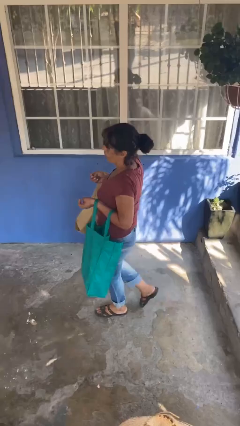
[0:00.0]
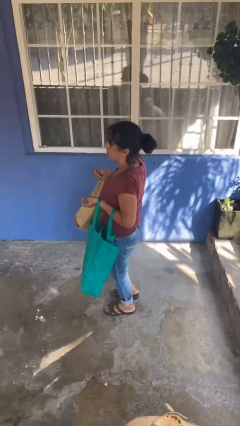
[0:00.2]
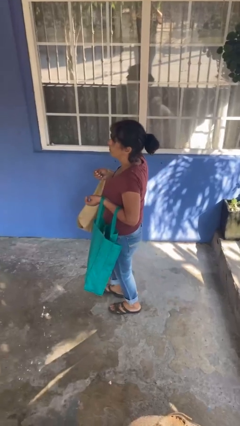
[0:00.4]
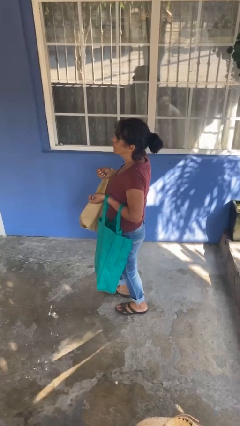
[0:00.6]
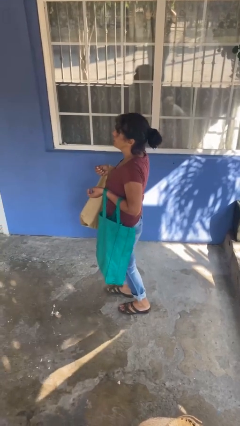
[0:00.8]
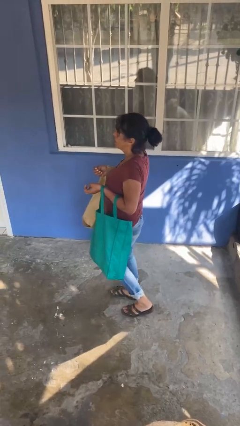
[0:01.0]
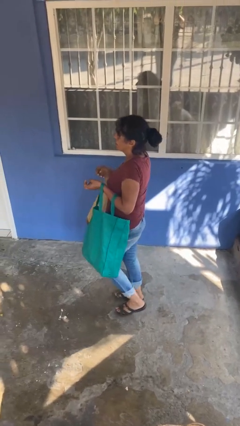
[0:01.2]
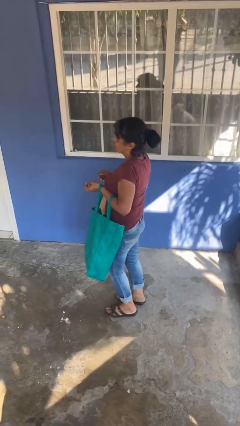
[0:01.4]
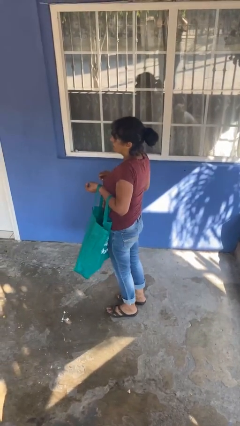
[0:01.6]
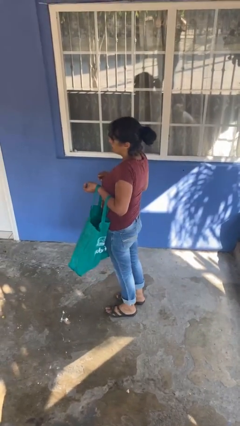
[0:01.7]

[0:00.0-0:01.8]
person carries groceries

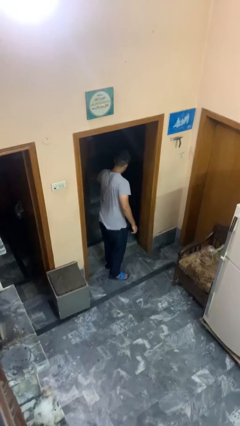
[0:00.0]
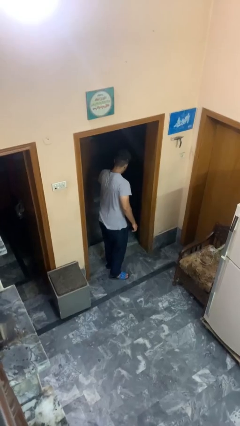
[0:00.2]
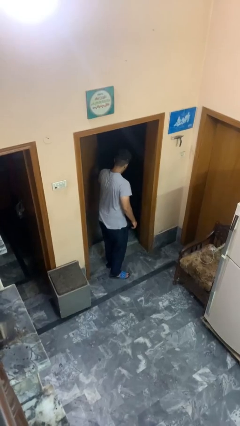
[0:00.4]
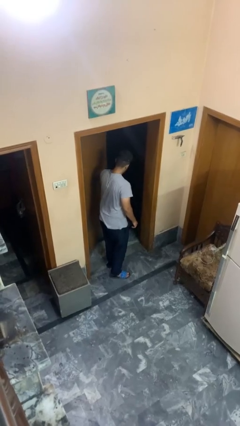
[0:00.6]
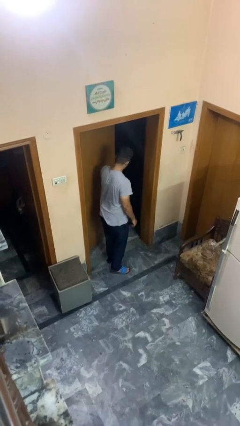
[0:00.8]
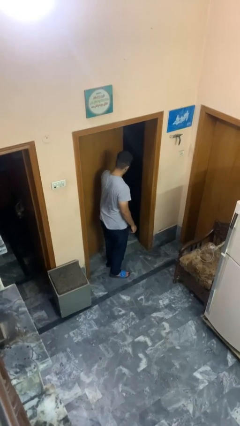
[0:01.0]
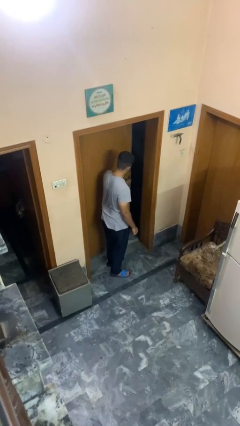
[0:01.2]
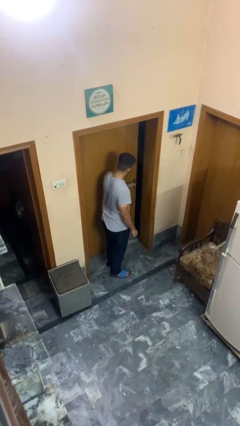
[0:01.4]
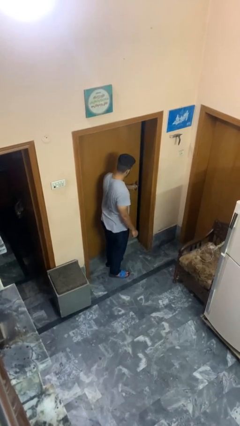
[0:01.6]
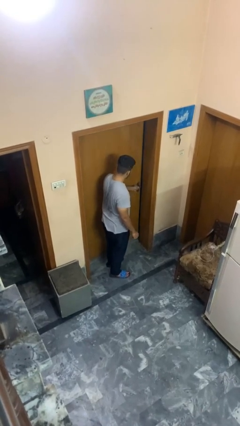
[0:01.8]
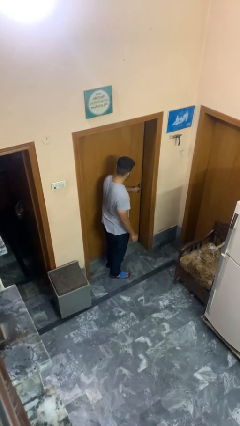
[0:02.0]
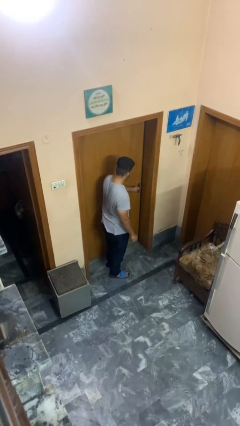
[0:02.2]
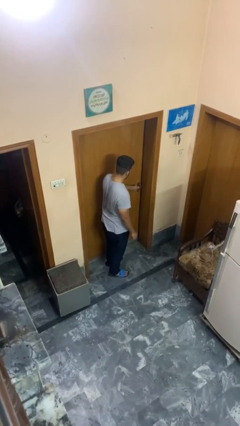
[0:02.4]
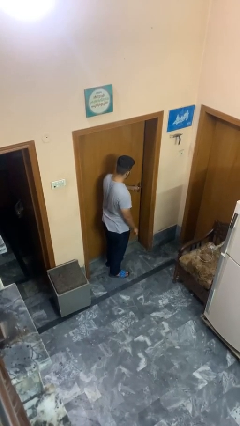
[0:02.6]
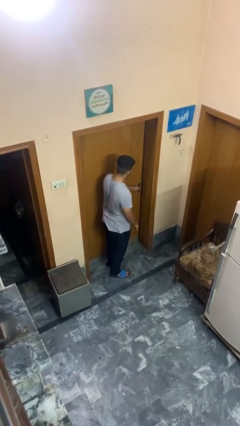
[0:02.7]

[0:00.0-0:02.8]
person closes facility door

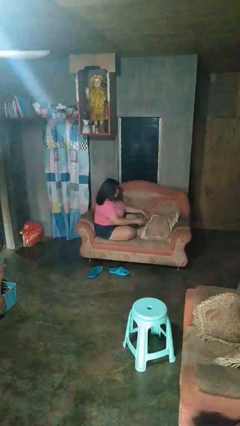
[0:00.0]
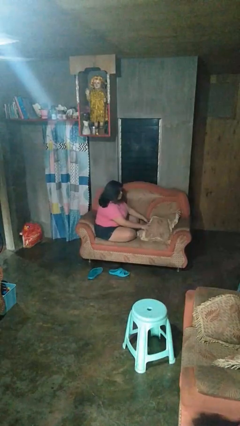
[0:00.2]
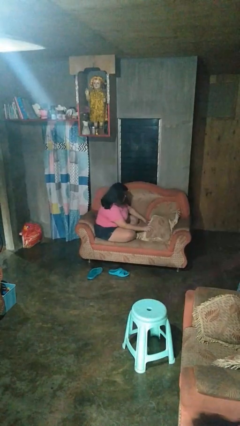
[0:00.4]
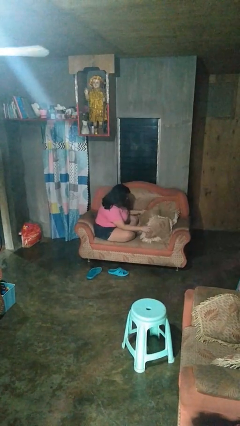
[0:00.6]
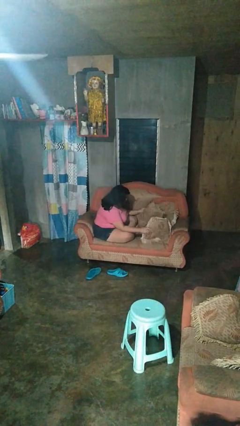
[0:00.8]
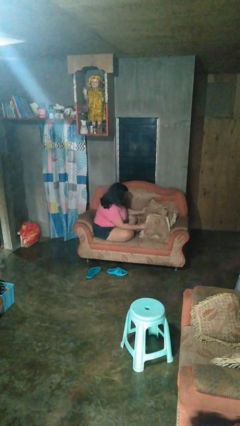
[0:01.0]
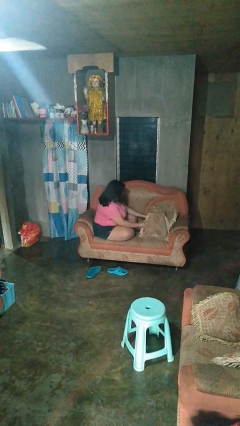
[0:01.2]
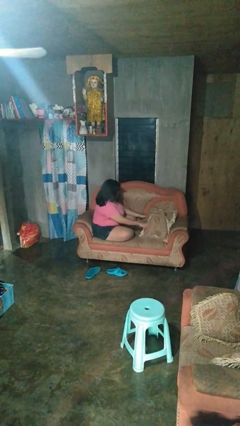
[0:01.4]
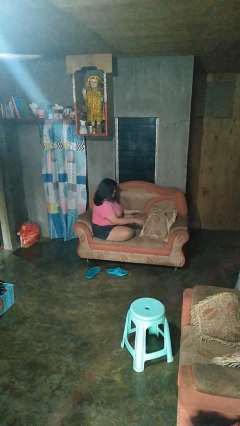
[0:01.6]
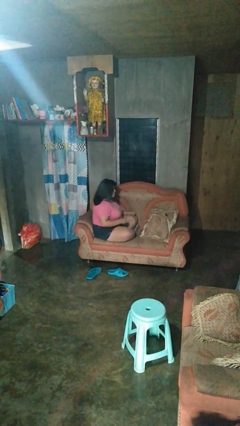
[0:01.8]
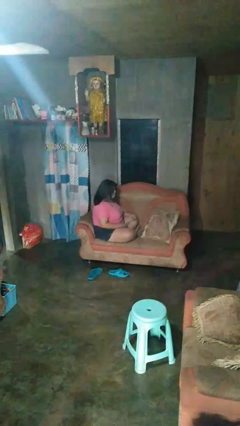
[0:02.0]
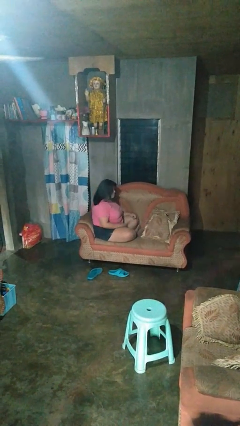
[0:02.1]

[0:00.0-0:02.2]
person searches in couch

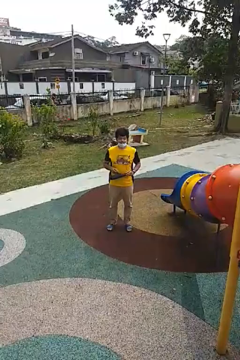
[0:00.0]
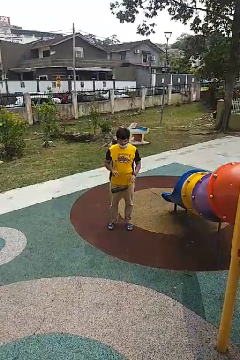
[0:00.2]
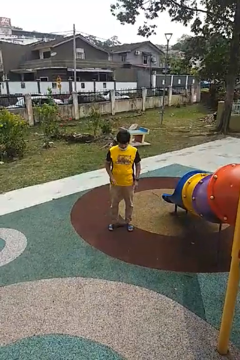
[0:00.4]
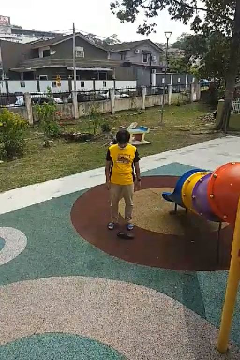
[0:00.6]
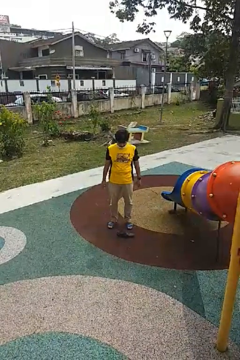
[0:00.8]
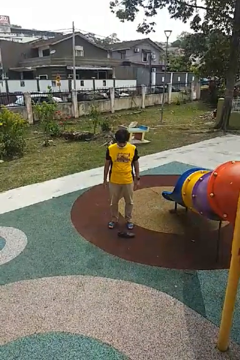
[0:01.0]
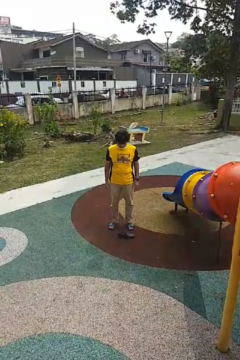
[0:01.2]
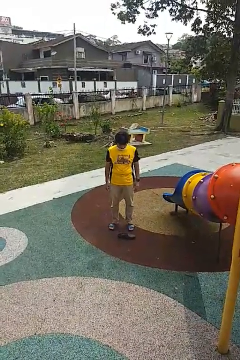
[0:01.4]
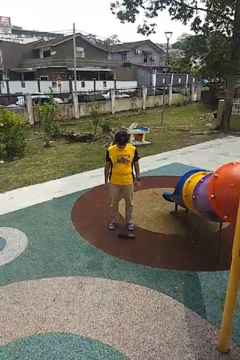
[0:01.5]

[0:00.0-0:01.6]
person drops object

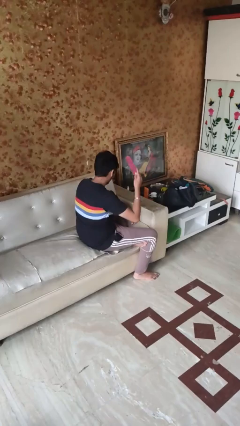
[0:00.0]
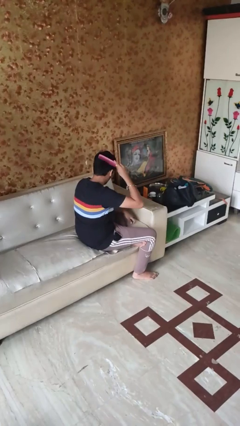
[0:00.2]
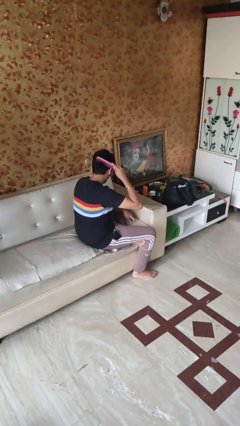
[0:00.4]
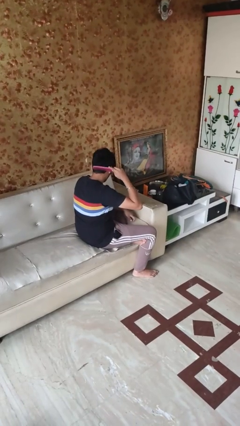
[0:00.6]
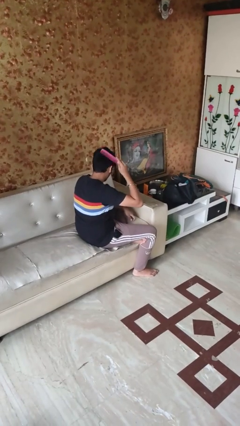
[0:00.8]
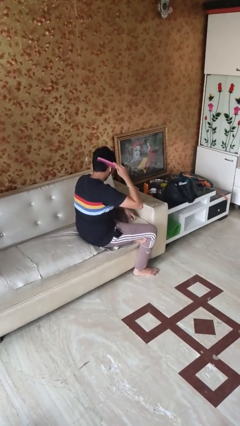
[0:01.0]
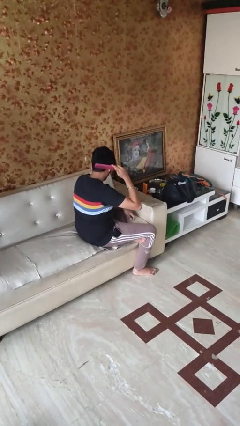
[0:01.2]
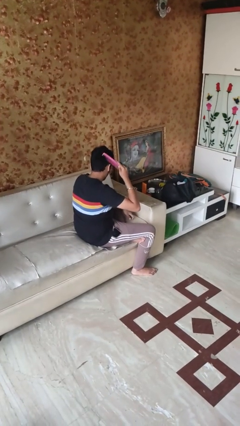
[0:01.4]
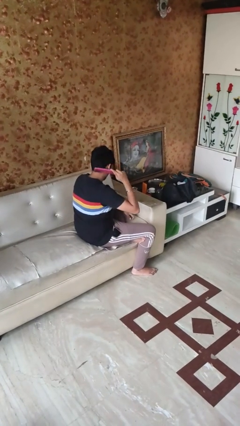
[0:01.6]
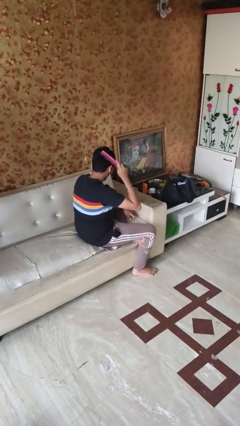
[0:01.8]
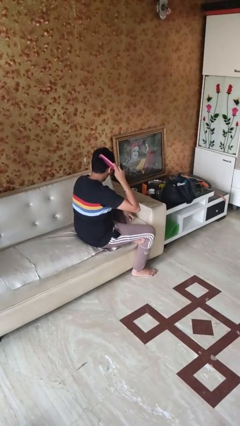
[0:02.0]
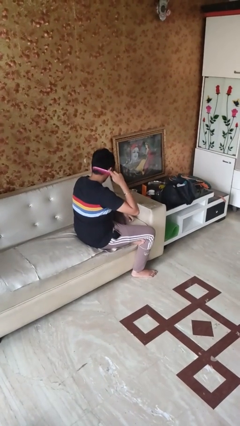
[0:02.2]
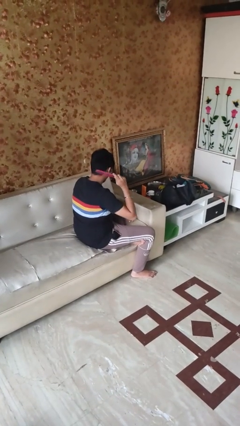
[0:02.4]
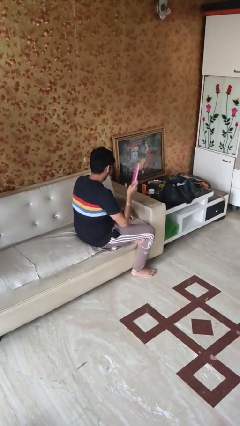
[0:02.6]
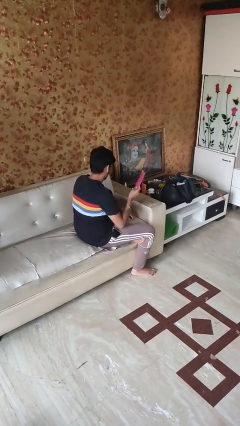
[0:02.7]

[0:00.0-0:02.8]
person brushes hair

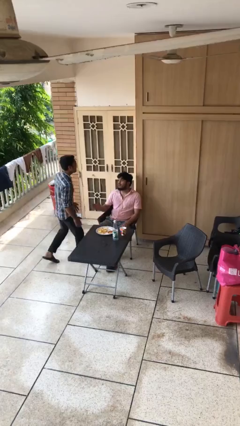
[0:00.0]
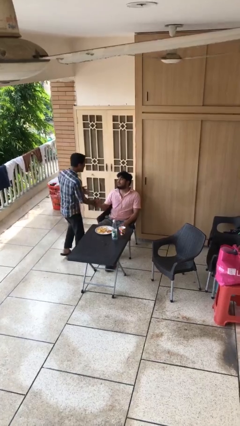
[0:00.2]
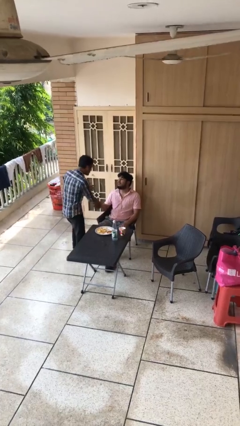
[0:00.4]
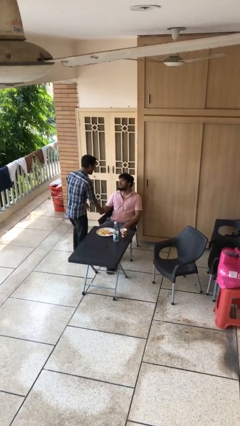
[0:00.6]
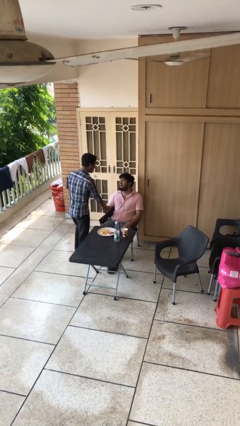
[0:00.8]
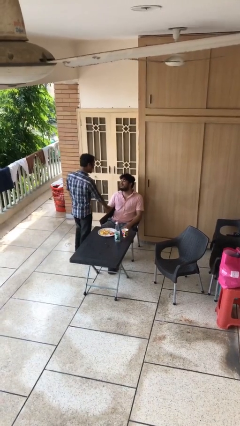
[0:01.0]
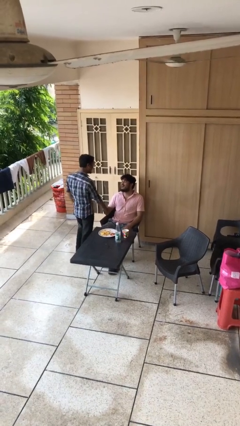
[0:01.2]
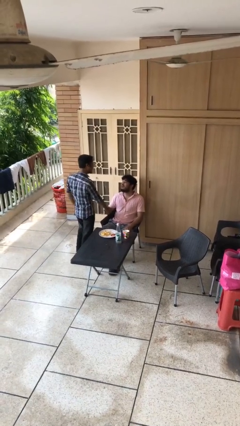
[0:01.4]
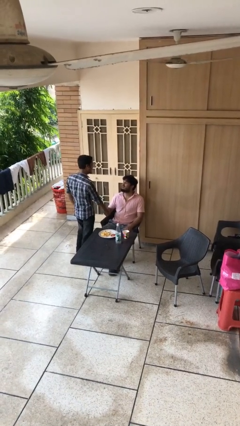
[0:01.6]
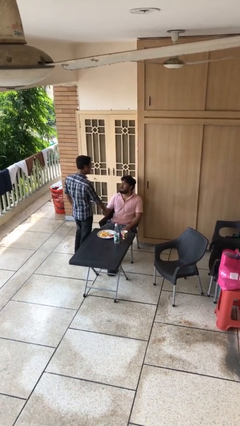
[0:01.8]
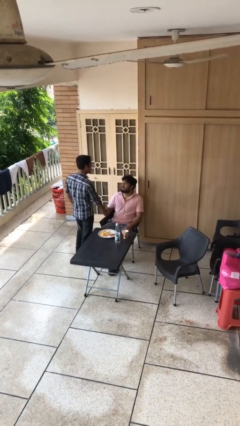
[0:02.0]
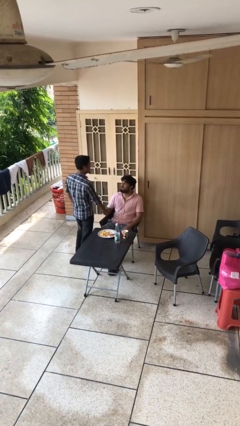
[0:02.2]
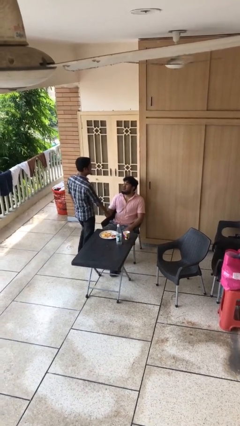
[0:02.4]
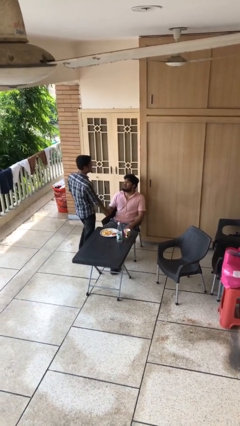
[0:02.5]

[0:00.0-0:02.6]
person shakes hand

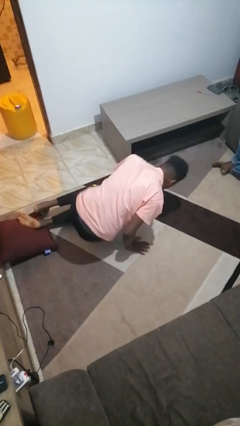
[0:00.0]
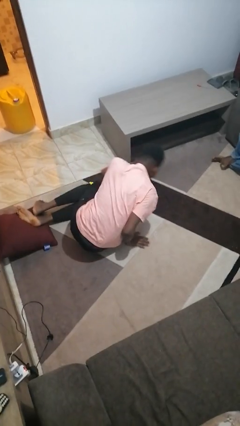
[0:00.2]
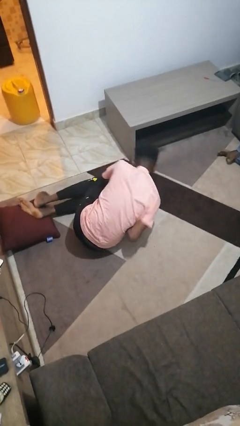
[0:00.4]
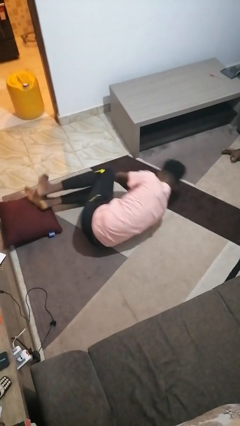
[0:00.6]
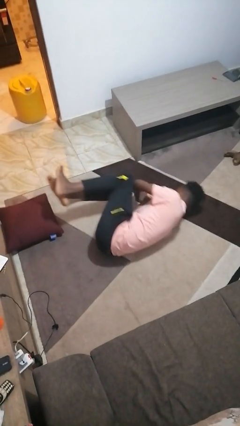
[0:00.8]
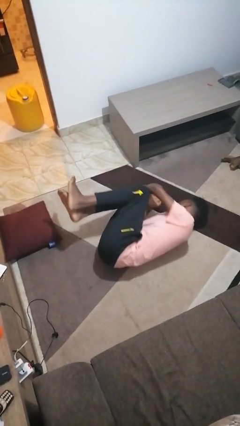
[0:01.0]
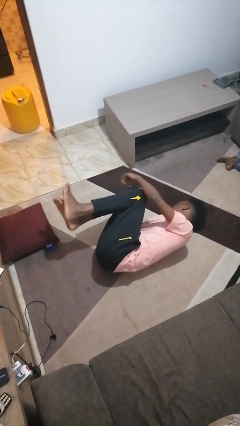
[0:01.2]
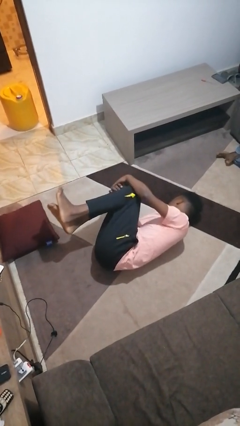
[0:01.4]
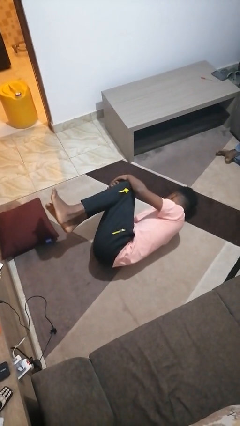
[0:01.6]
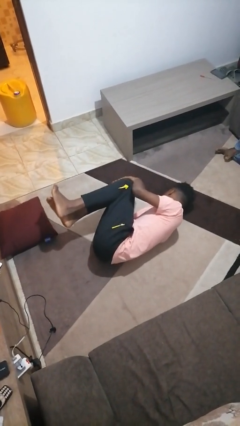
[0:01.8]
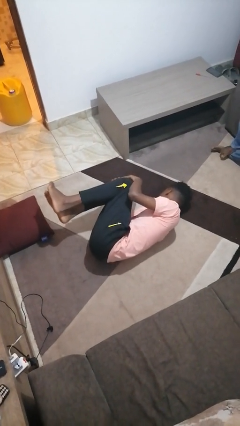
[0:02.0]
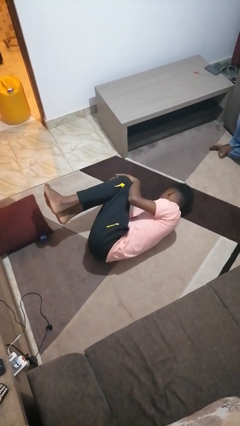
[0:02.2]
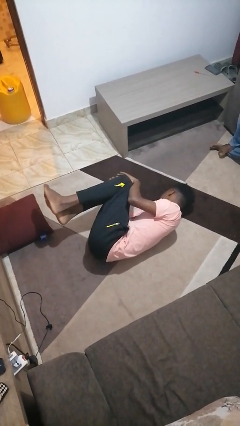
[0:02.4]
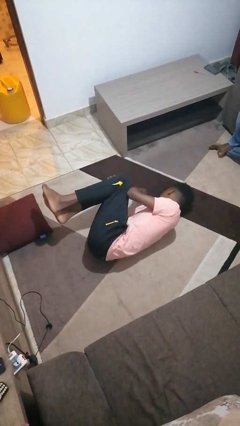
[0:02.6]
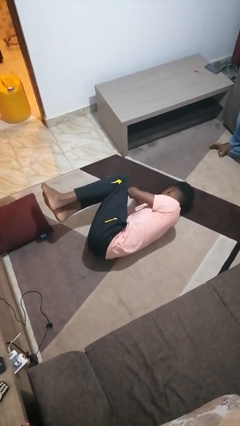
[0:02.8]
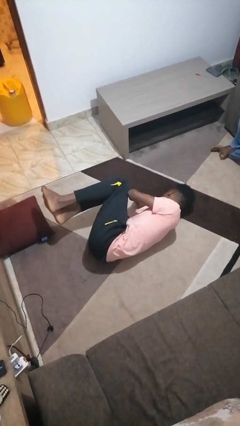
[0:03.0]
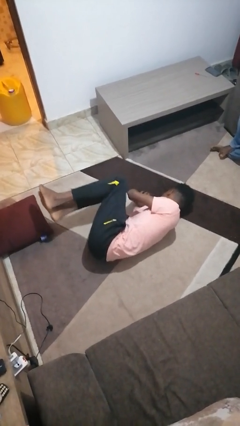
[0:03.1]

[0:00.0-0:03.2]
person lies down on floor

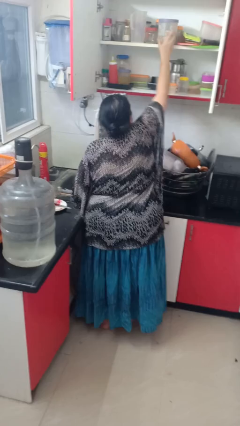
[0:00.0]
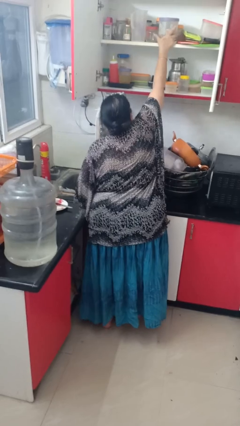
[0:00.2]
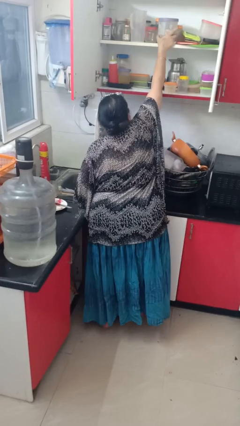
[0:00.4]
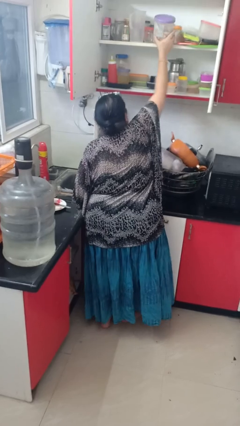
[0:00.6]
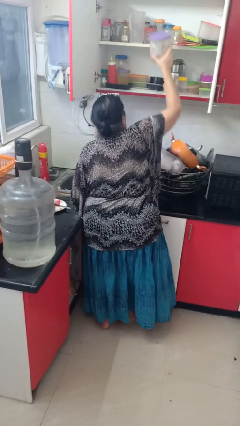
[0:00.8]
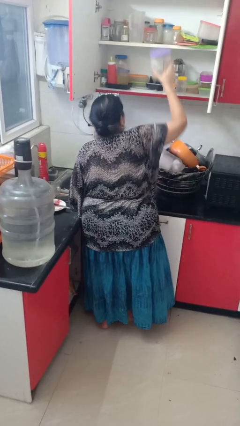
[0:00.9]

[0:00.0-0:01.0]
person puts object in cabinet
